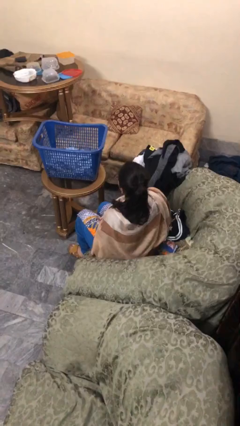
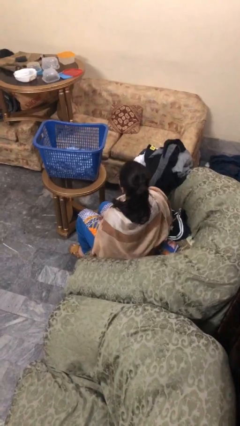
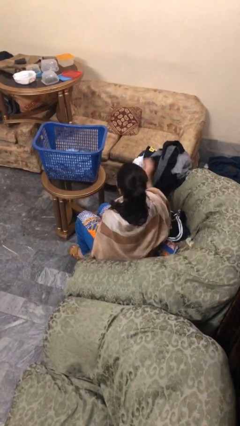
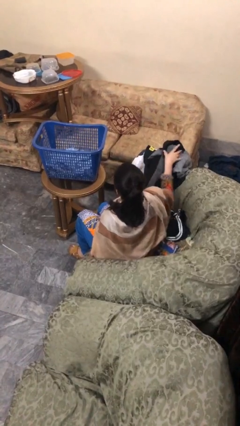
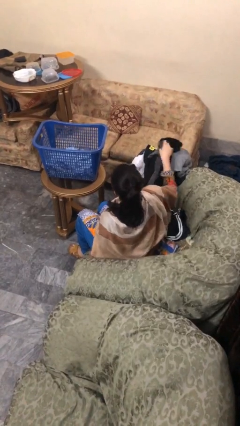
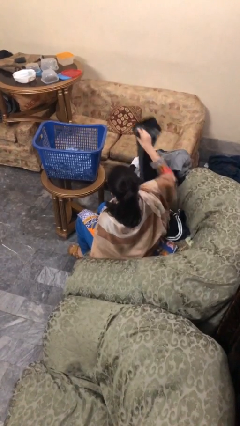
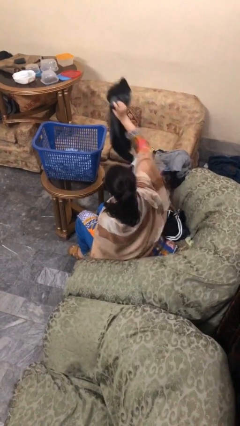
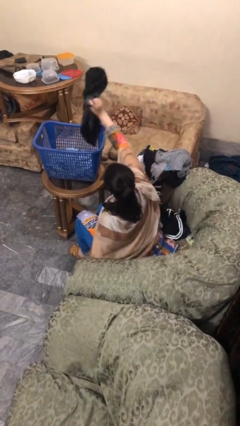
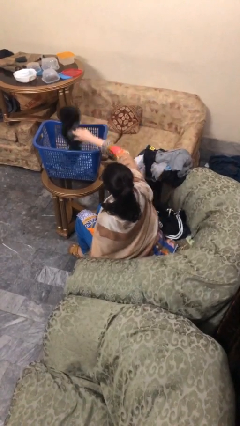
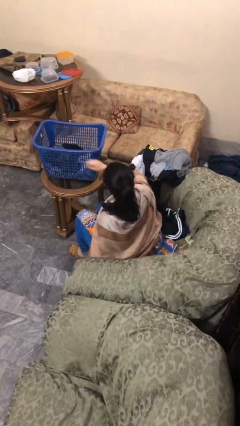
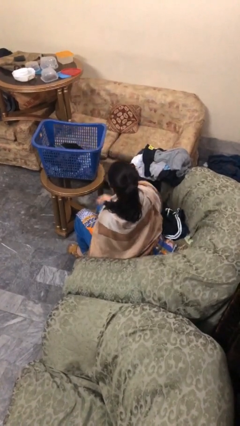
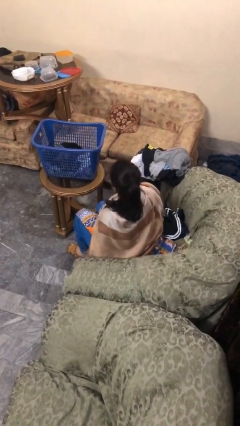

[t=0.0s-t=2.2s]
person puts object into basket

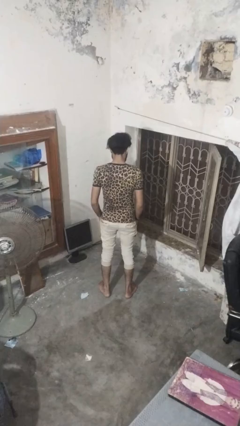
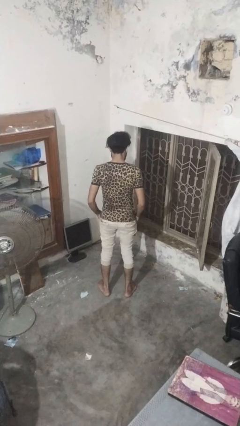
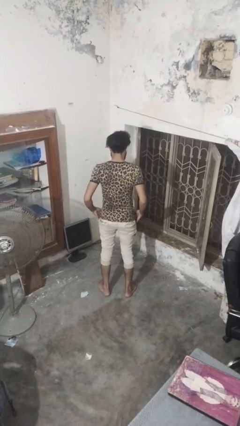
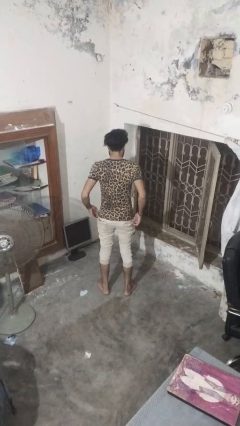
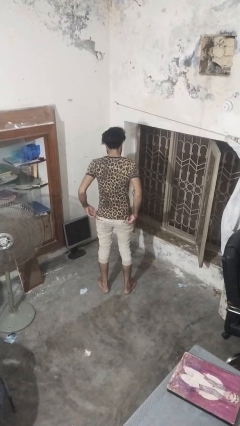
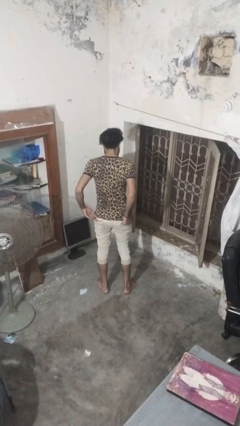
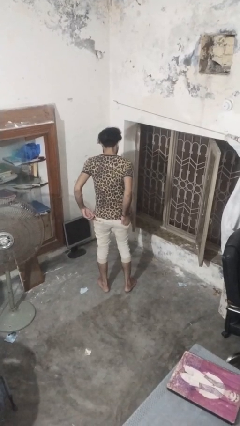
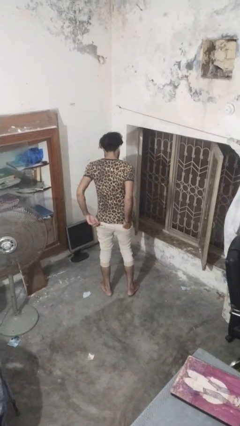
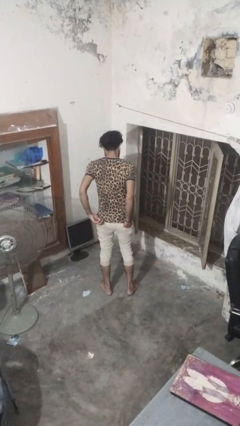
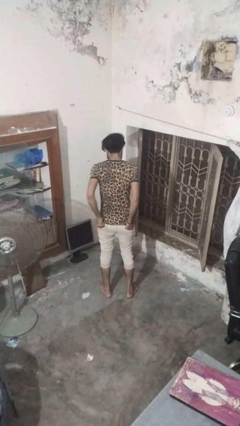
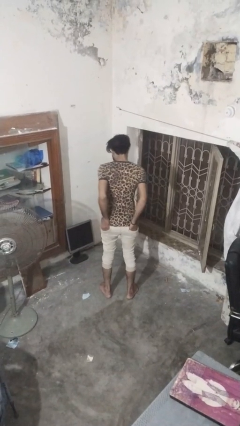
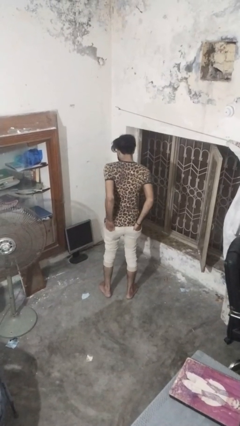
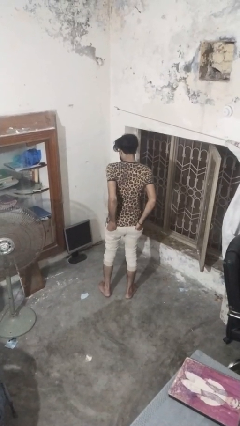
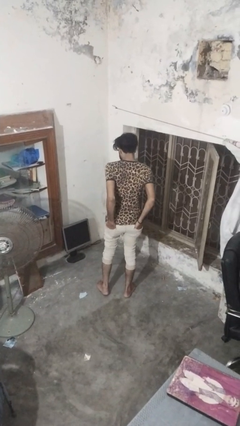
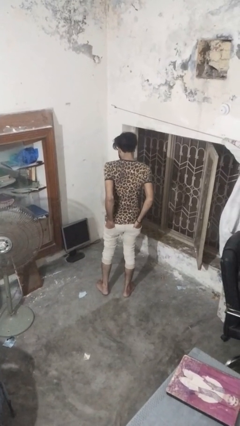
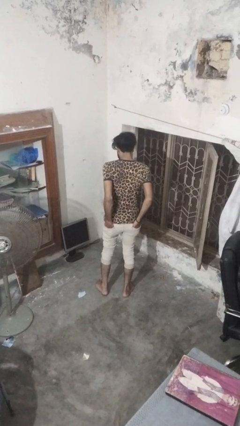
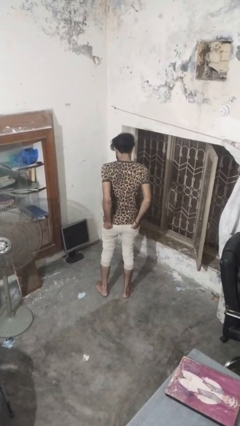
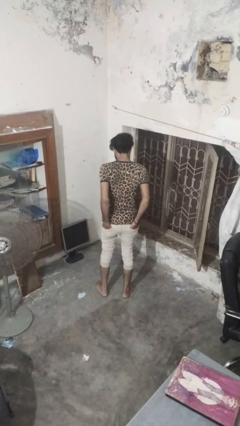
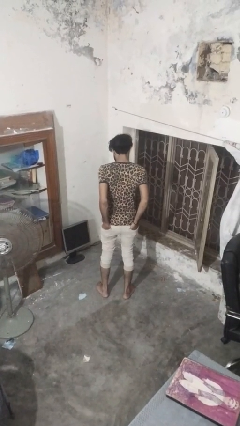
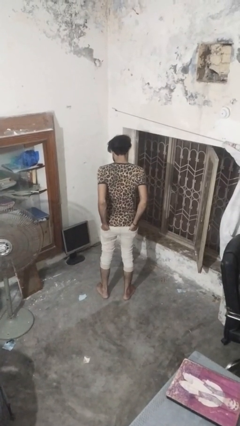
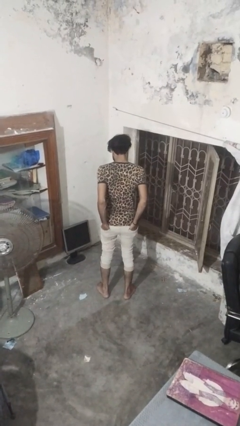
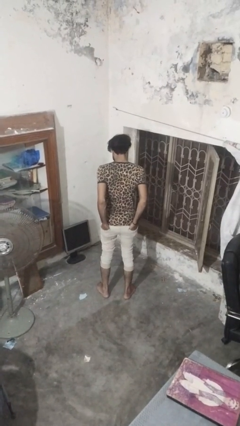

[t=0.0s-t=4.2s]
person puts hands in back pockets

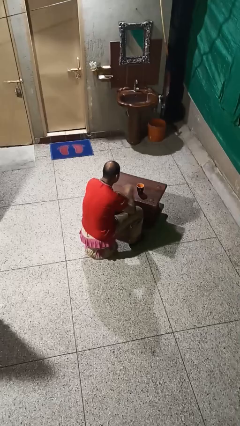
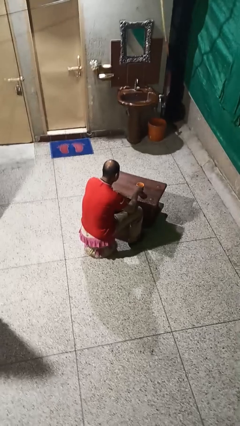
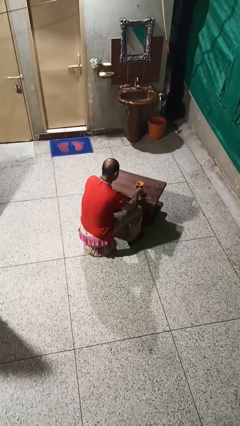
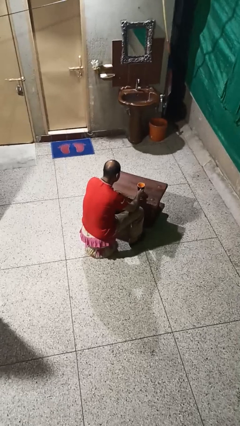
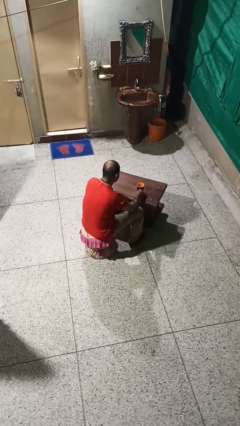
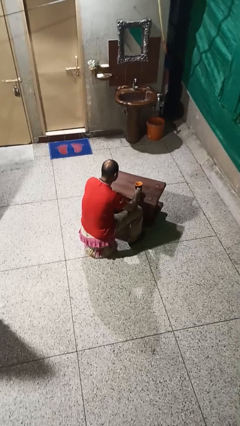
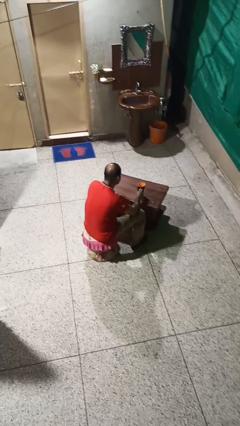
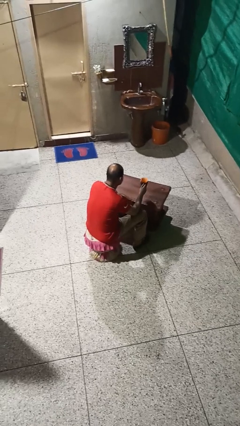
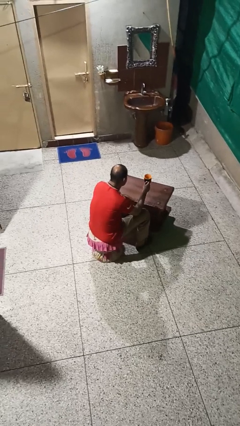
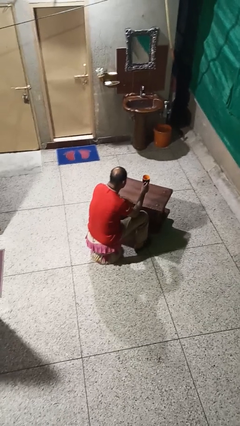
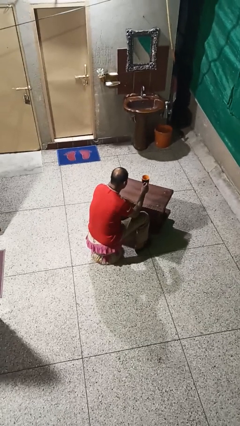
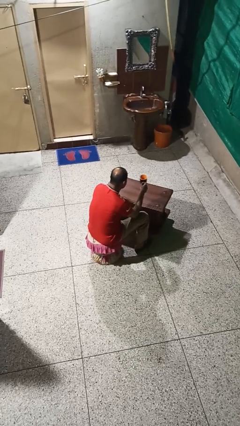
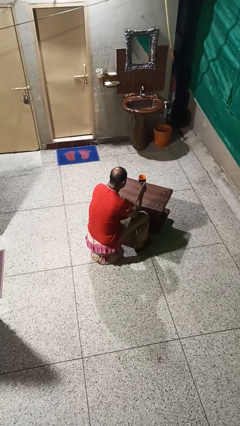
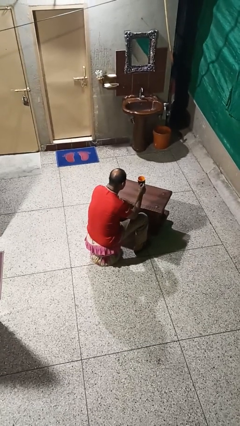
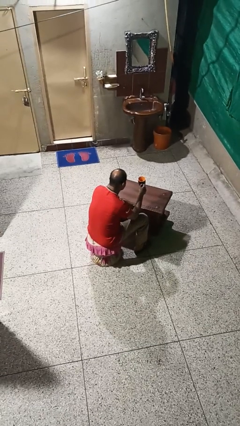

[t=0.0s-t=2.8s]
person picks up object from table

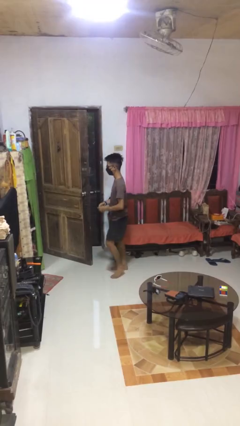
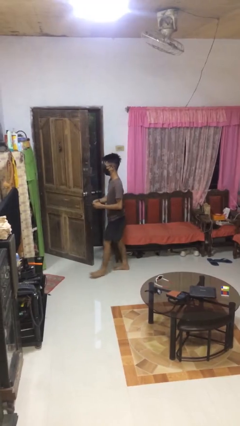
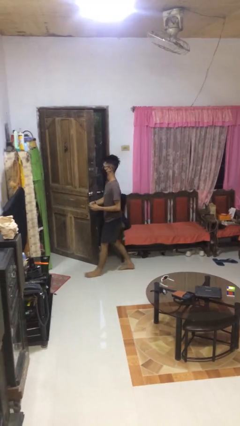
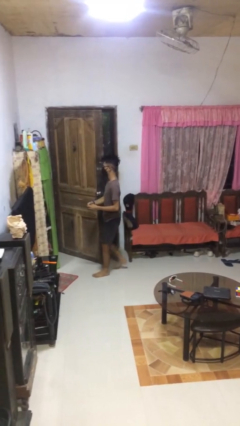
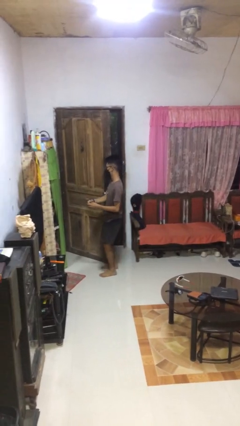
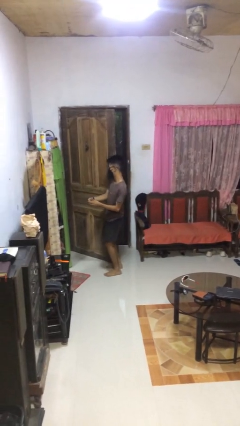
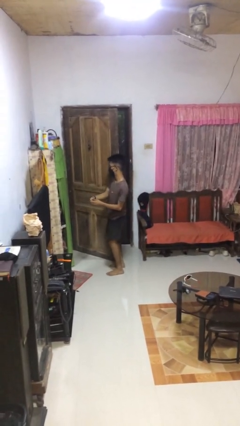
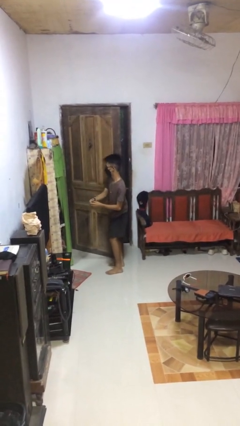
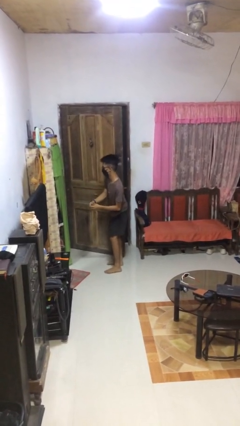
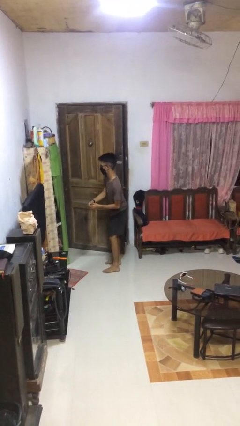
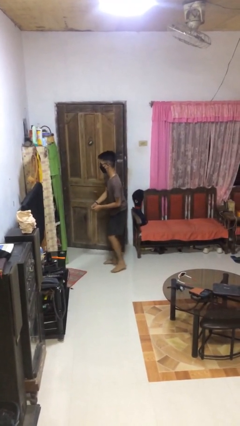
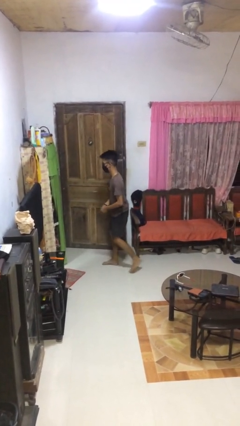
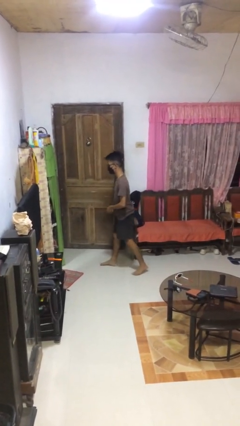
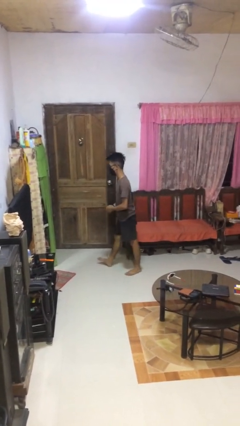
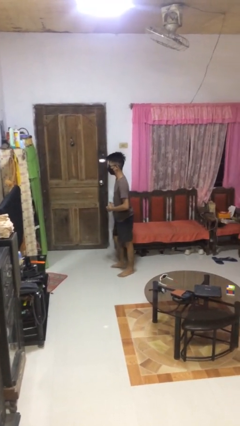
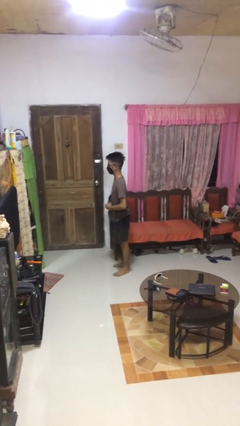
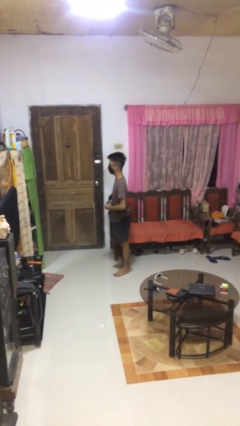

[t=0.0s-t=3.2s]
person closes door with hip

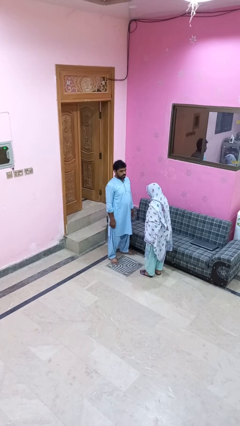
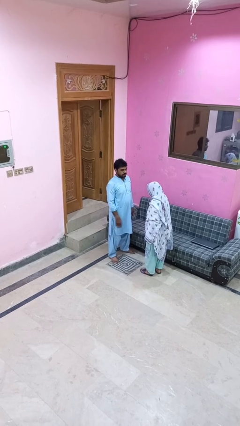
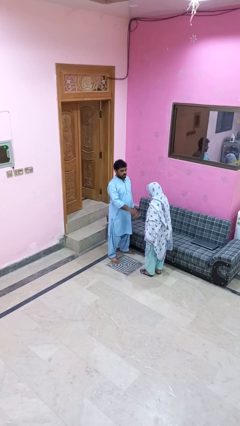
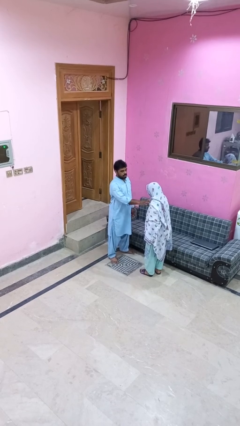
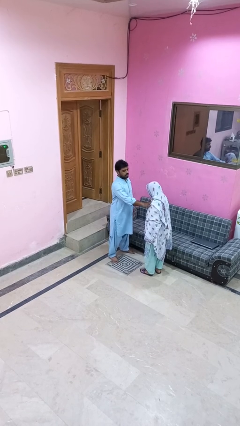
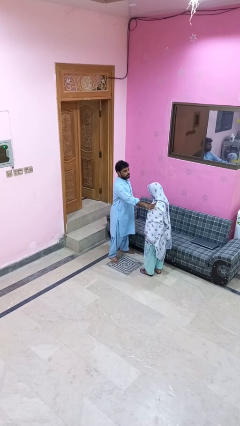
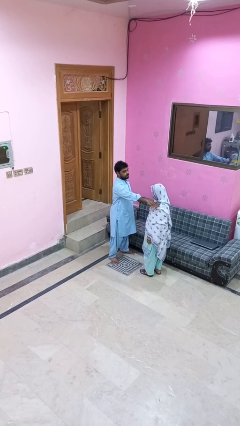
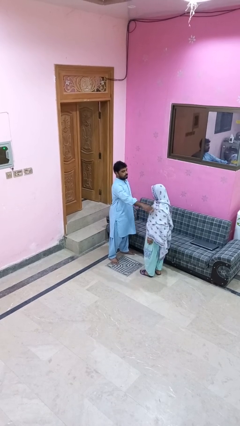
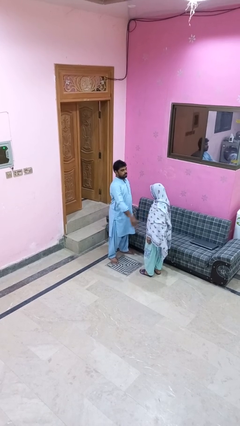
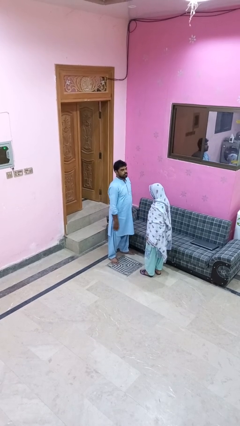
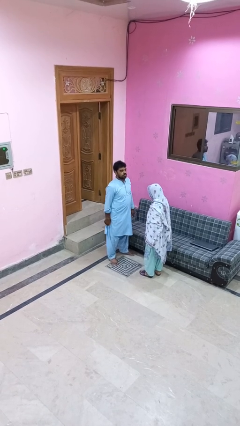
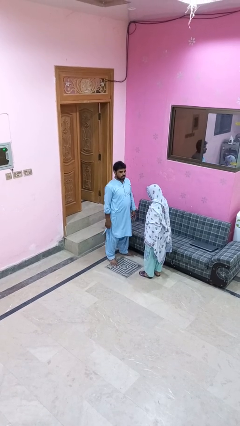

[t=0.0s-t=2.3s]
person shoves person

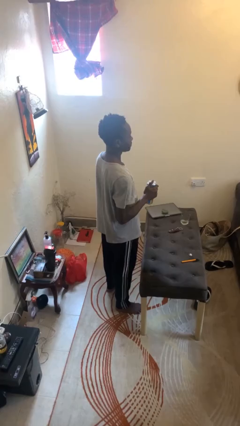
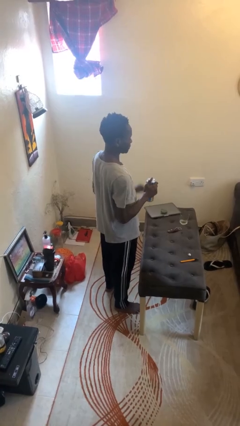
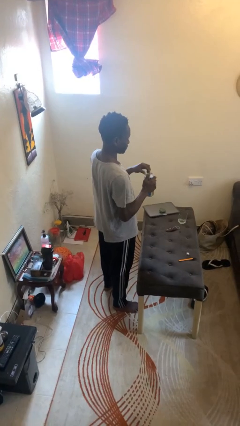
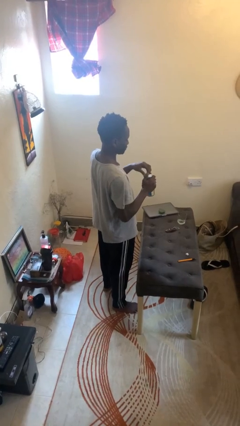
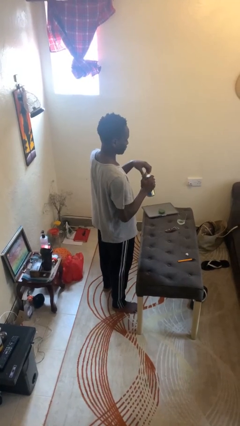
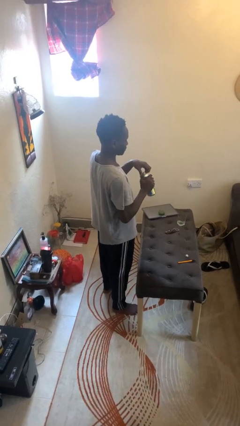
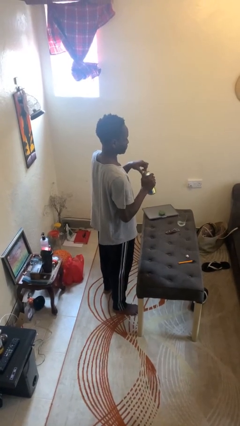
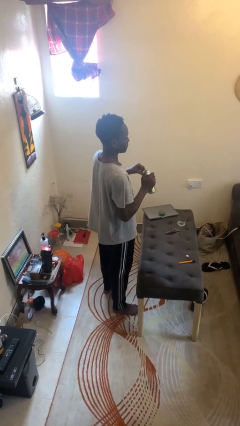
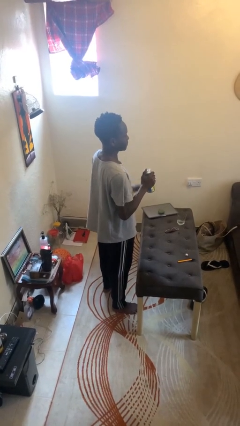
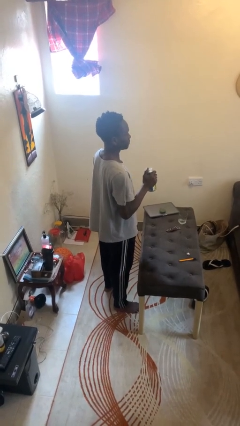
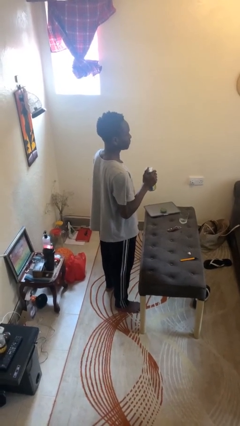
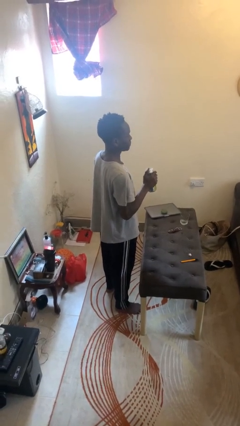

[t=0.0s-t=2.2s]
person opens beverage can

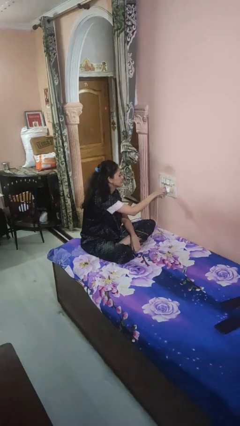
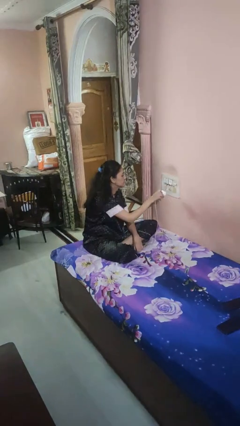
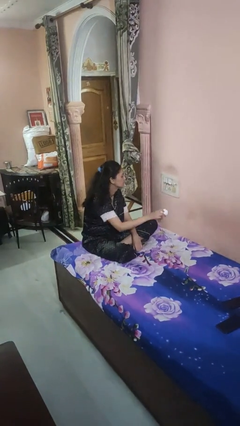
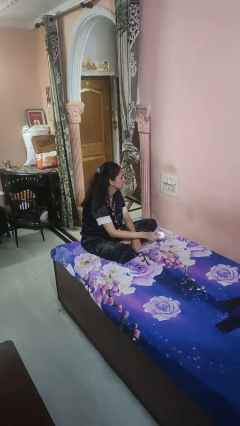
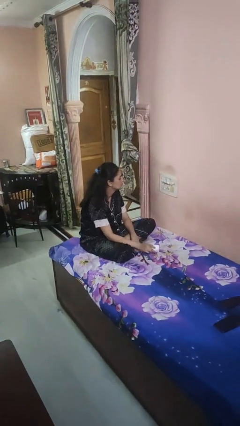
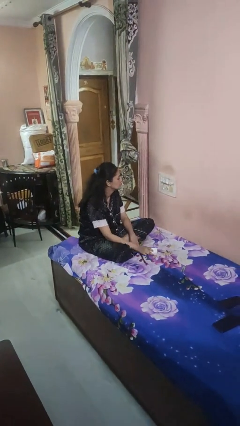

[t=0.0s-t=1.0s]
person unplugs from electrical socket
